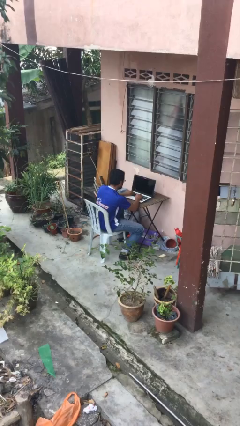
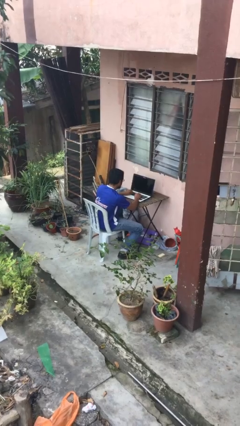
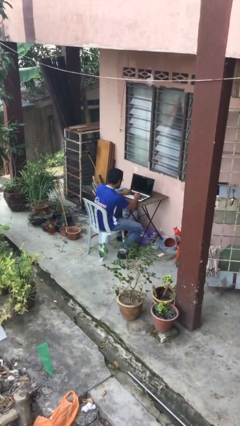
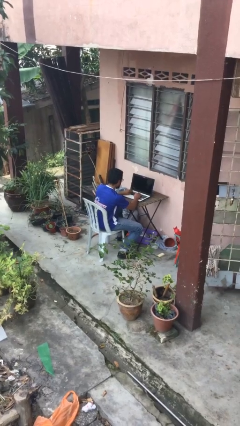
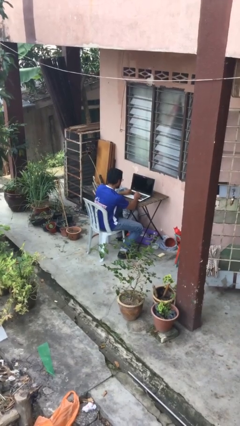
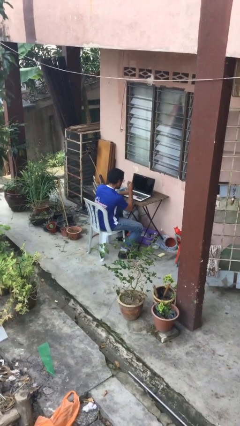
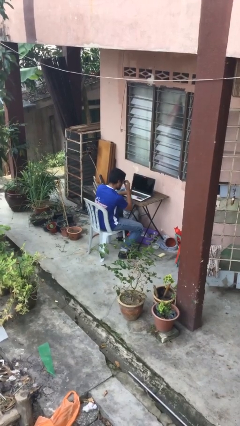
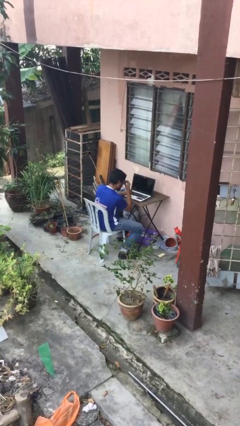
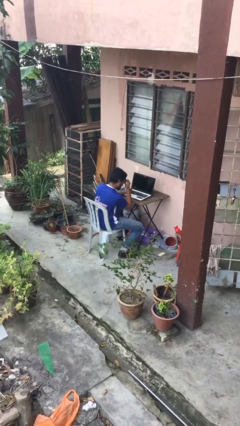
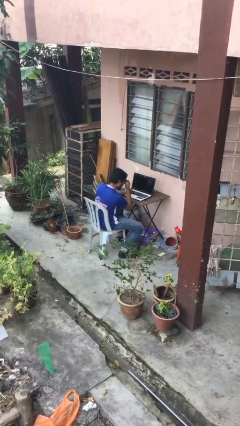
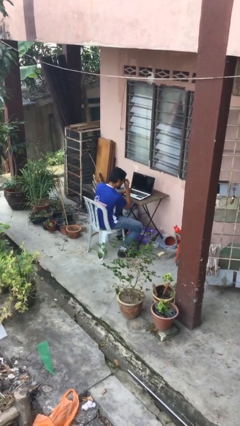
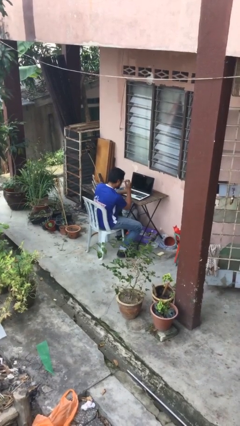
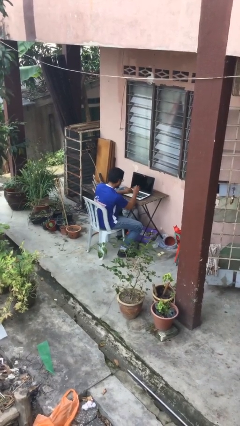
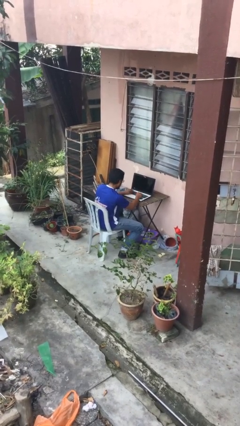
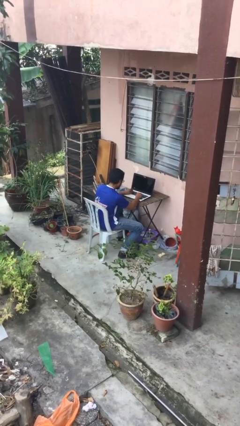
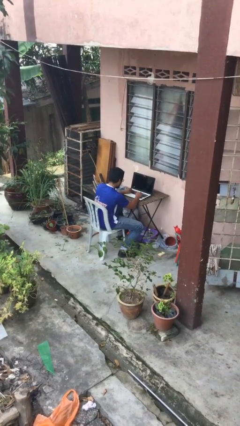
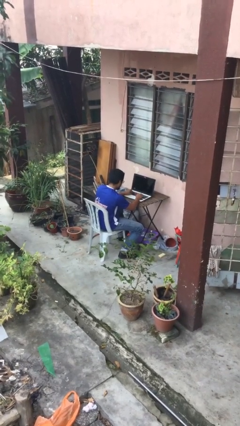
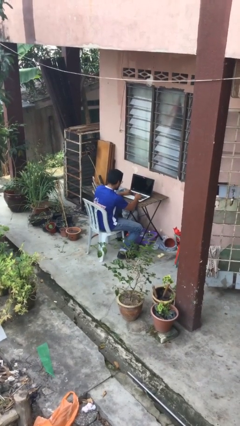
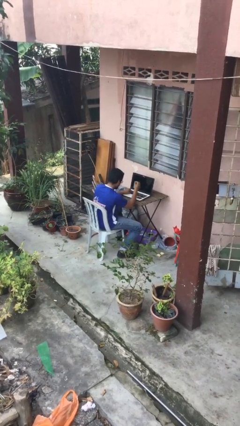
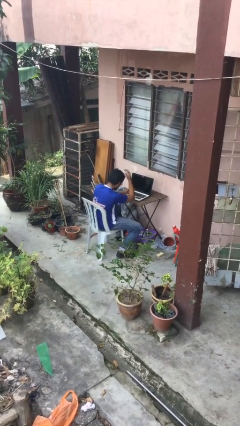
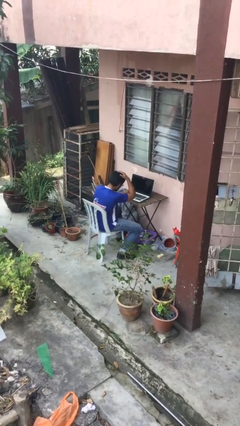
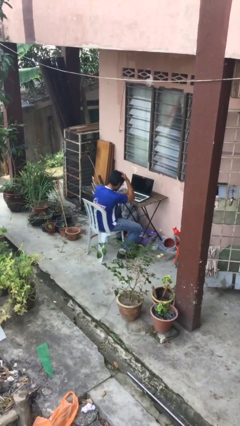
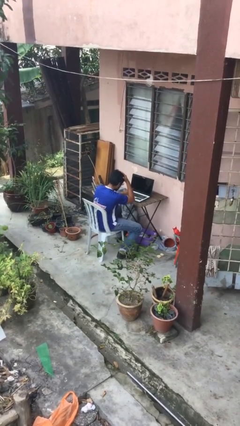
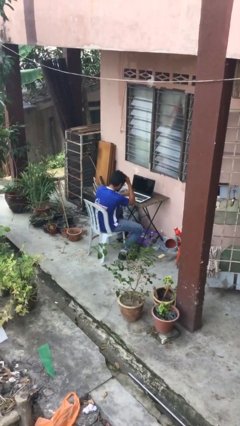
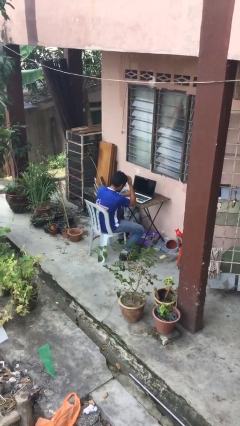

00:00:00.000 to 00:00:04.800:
person interacts with laptop

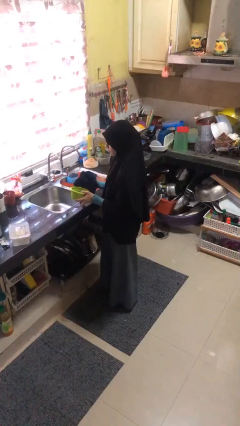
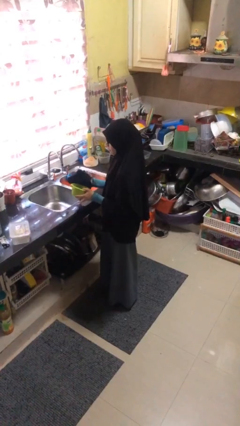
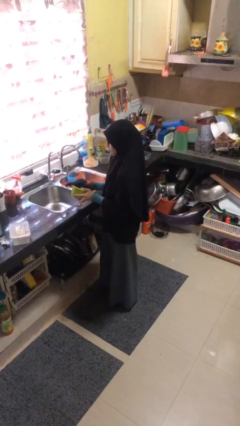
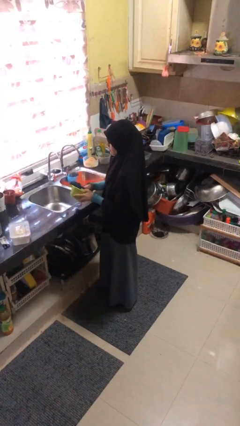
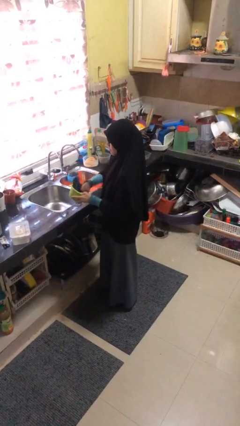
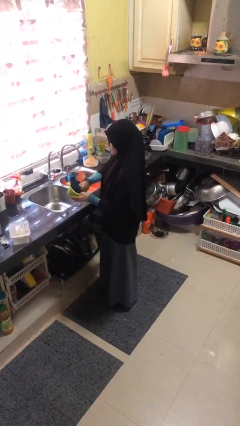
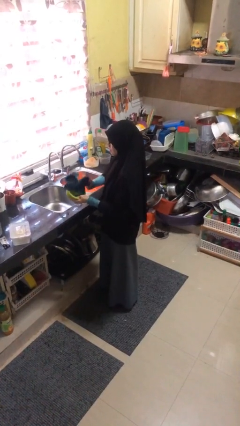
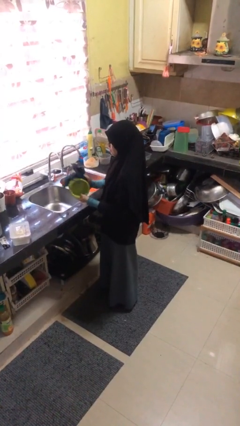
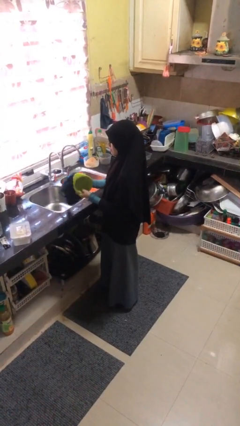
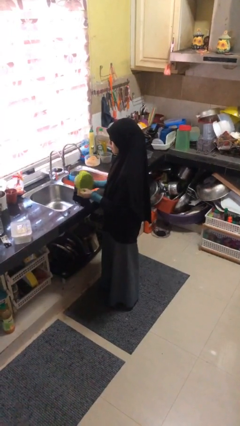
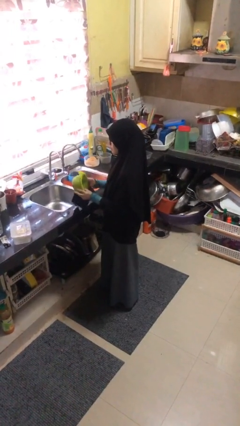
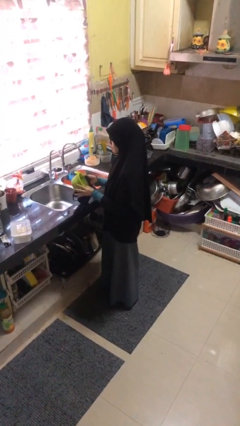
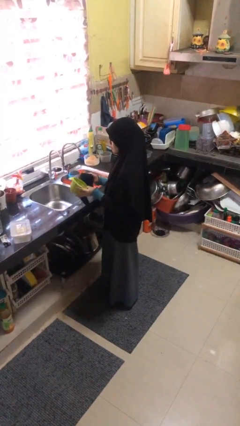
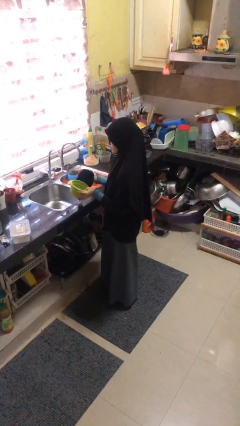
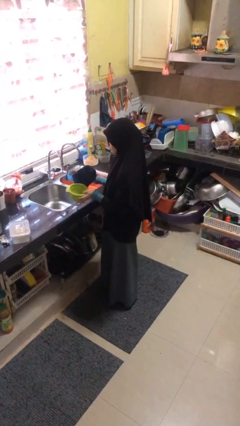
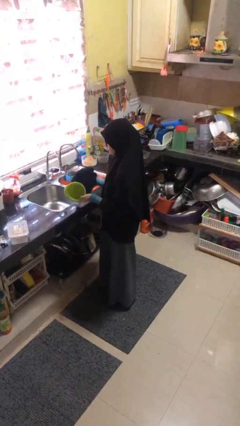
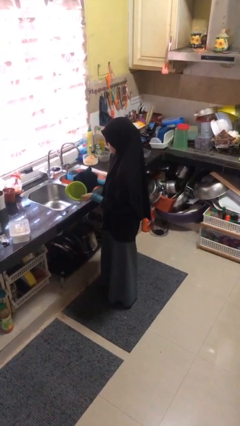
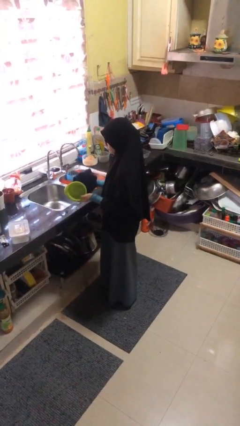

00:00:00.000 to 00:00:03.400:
person dries dish

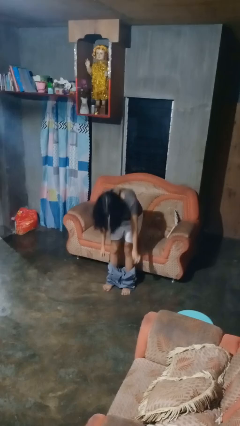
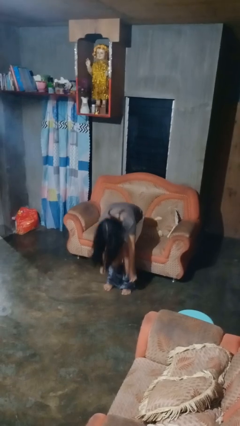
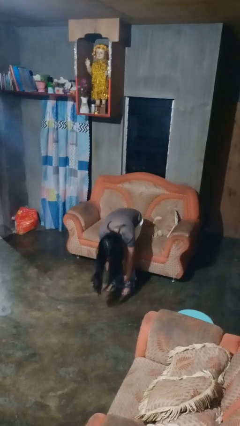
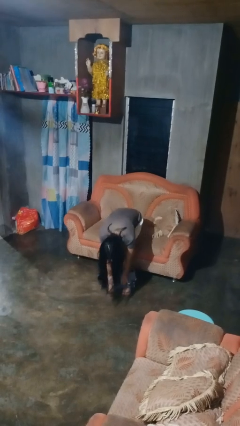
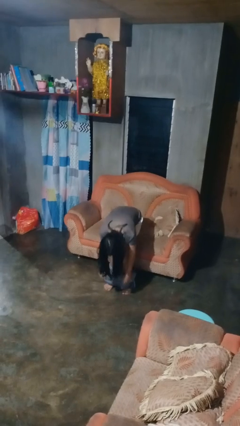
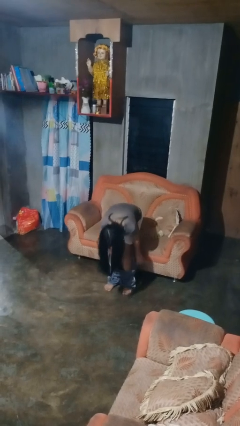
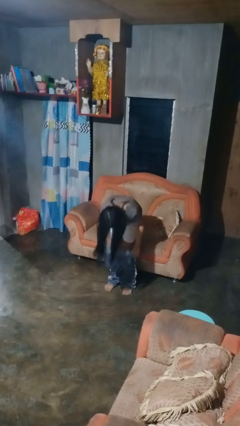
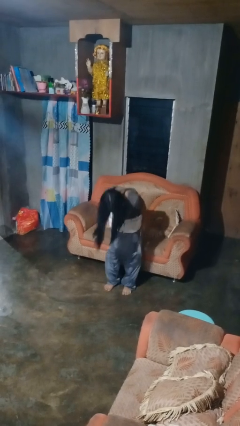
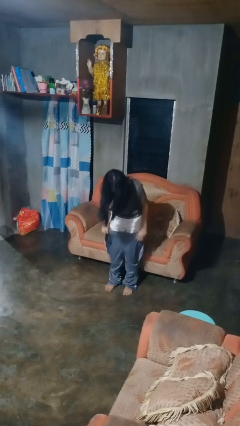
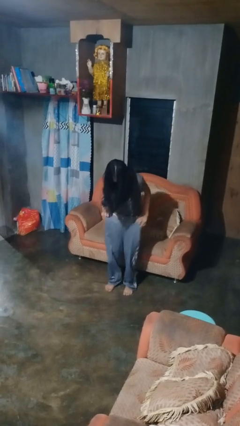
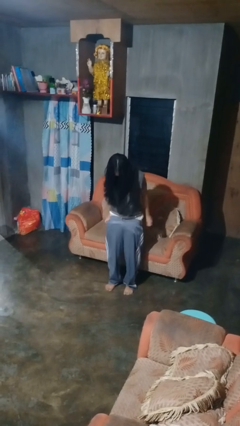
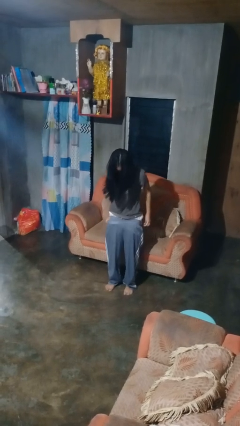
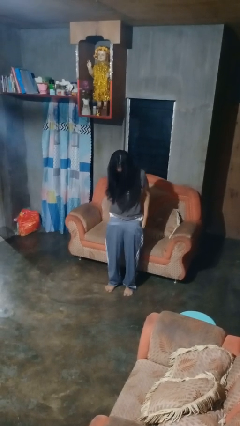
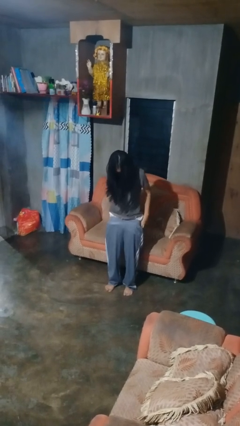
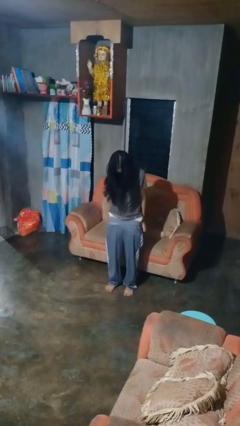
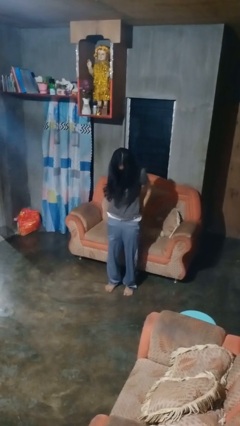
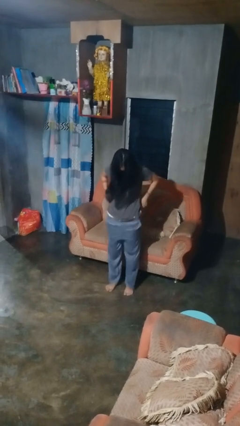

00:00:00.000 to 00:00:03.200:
person puts on pants

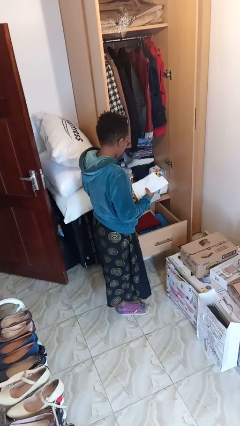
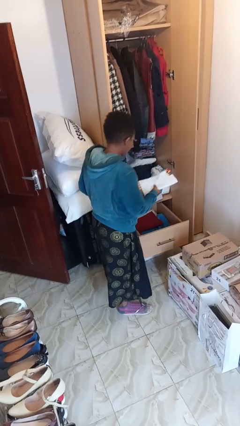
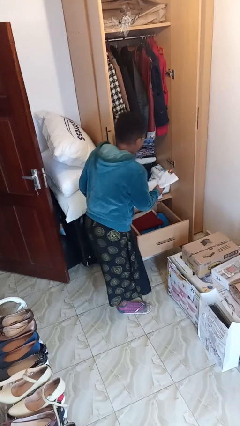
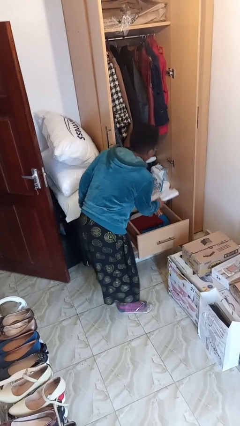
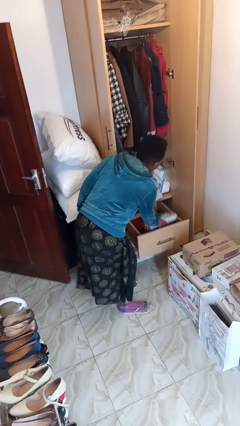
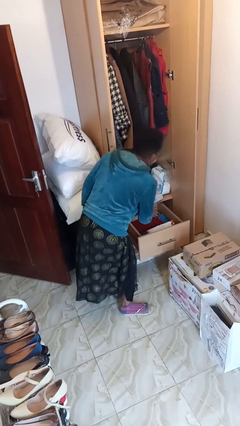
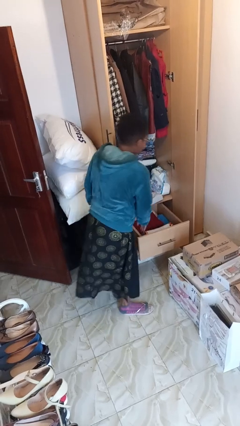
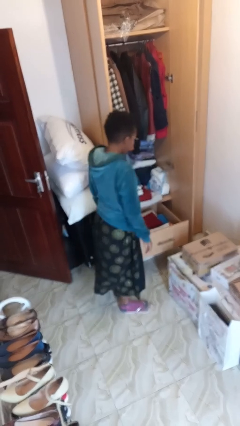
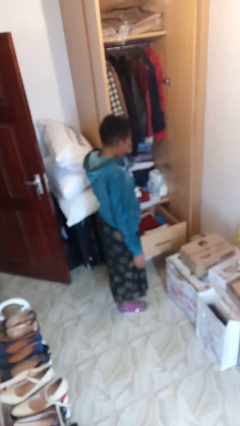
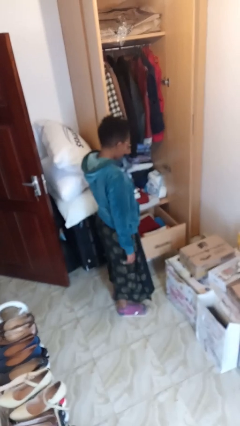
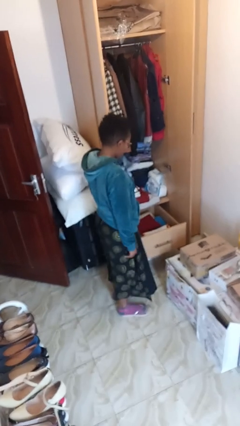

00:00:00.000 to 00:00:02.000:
person puts clothes into dresser

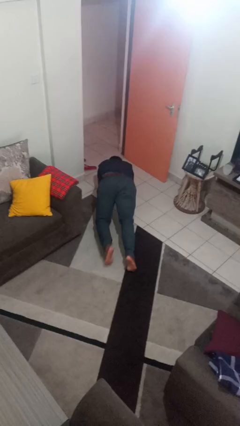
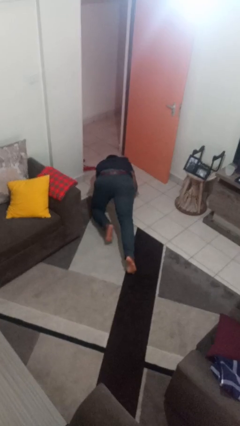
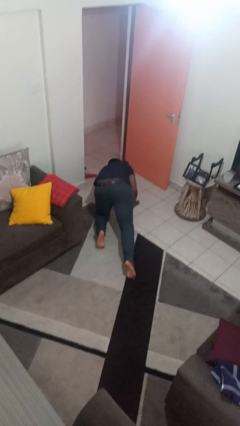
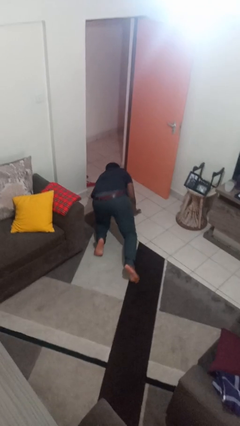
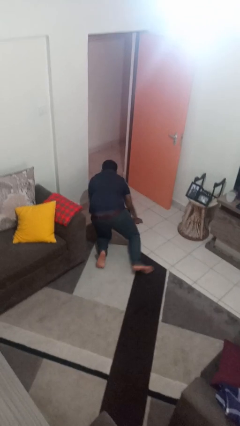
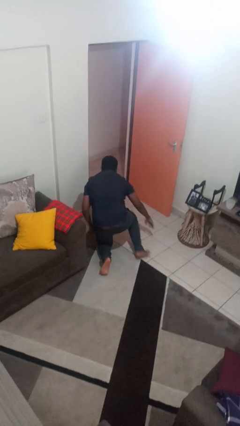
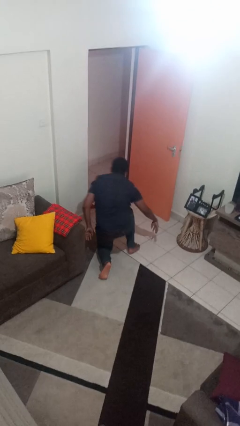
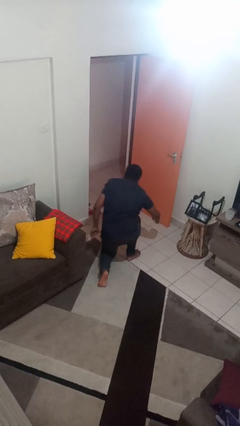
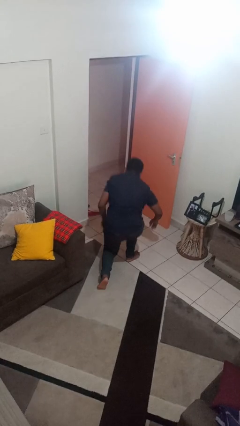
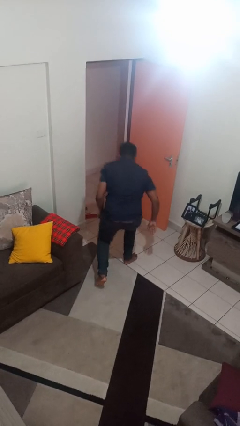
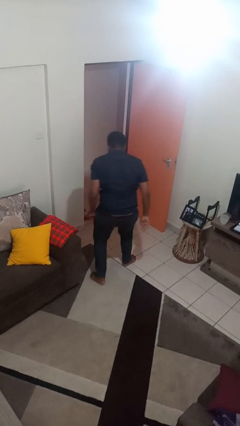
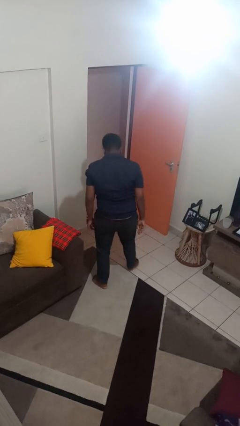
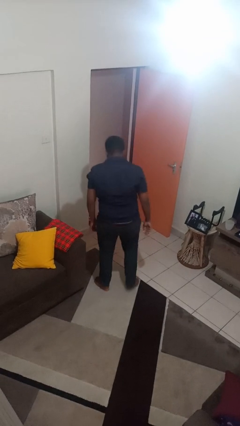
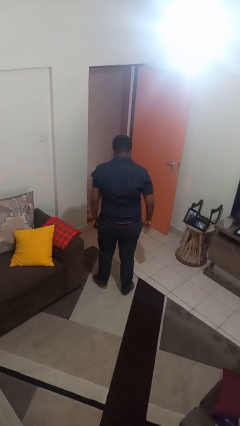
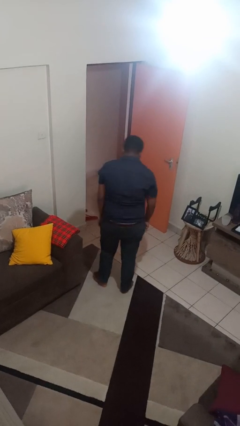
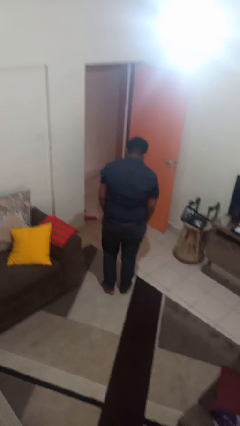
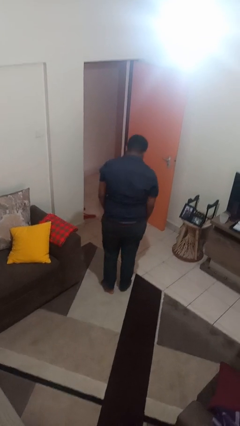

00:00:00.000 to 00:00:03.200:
person stands up from floor

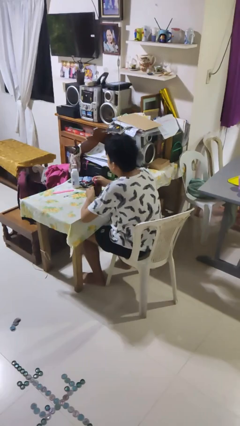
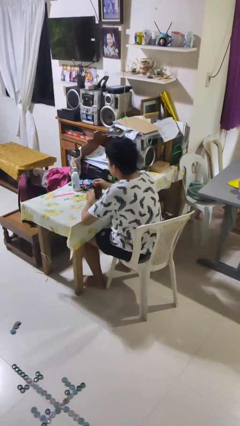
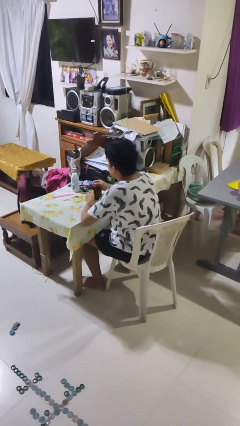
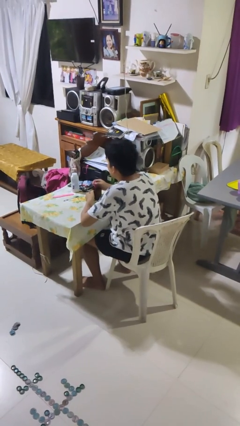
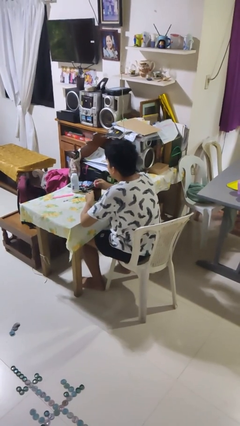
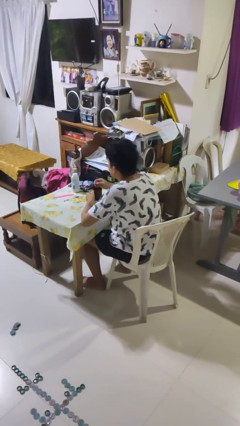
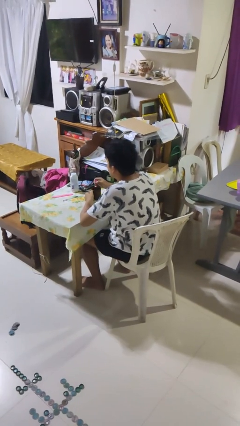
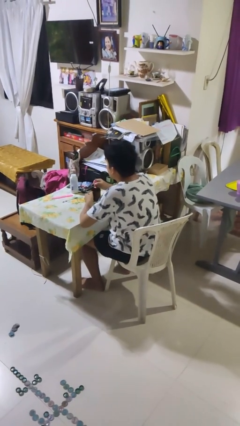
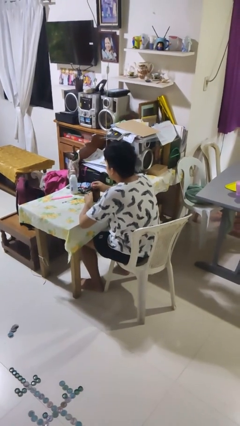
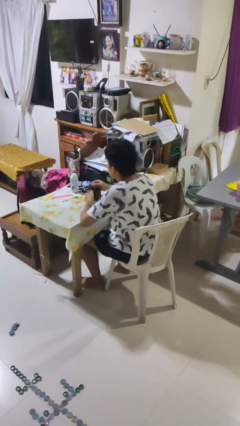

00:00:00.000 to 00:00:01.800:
person stirs mug
